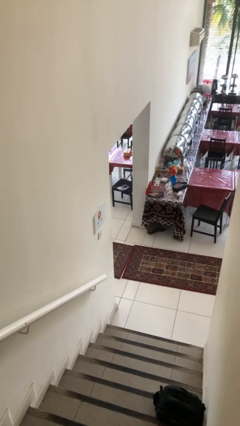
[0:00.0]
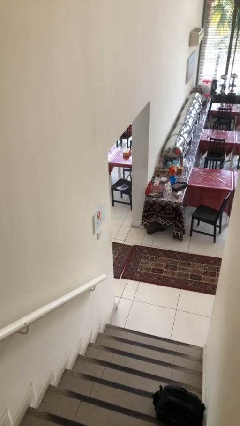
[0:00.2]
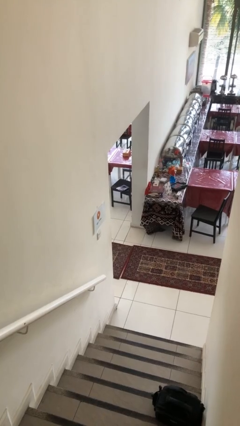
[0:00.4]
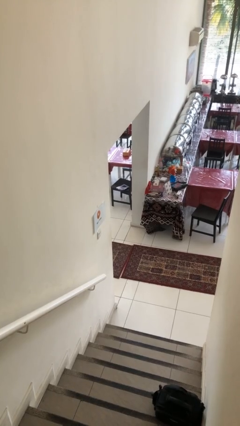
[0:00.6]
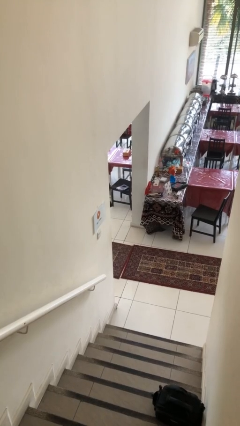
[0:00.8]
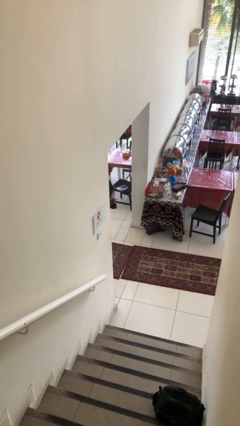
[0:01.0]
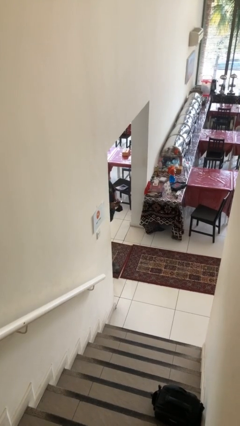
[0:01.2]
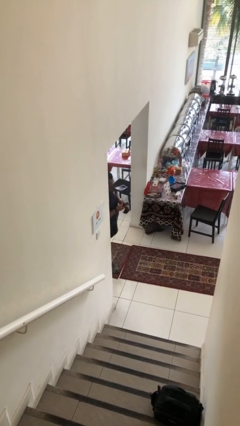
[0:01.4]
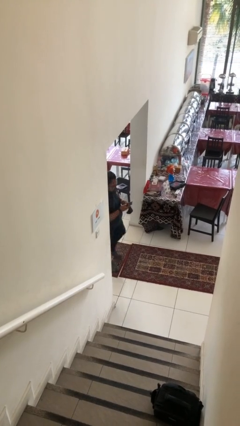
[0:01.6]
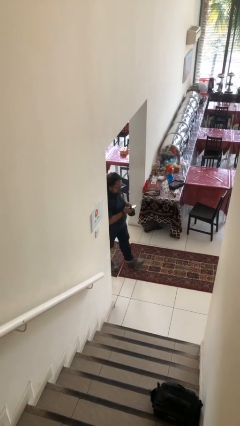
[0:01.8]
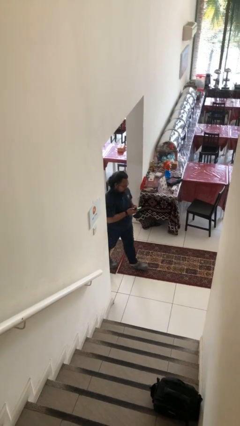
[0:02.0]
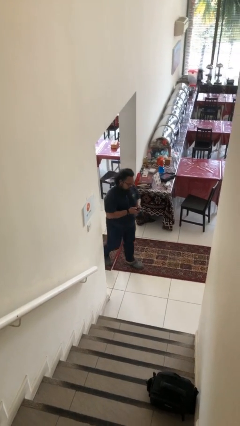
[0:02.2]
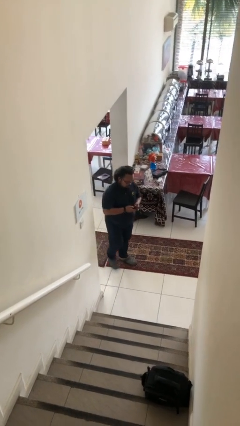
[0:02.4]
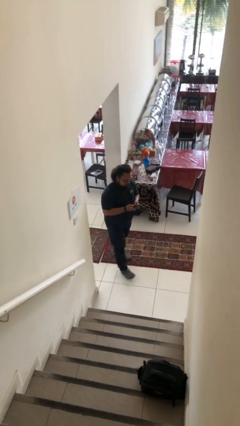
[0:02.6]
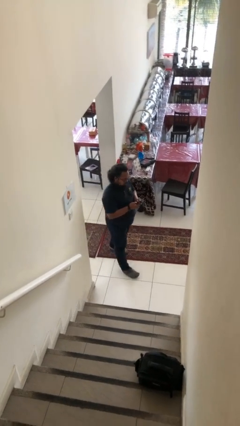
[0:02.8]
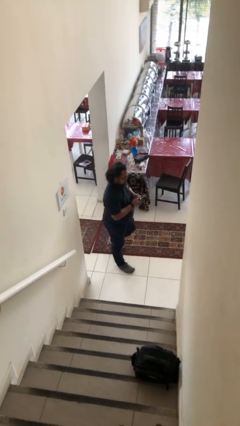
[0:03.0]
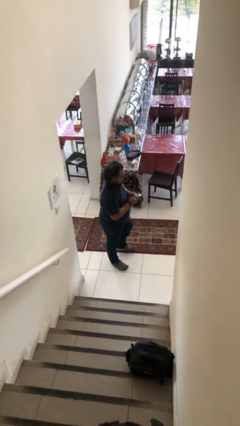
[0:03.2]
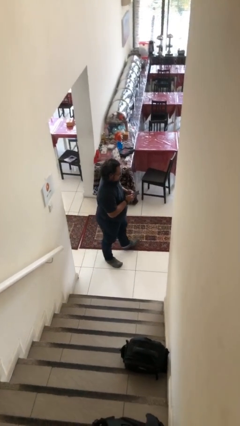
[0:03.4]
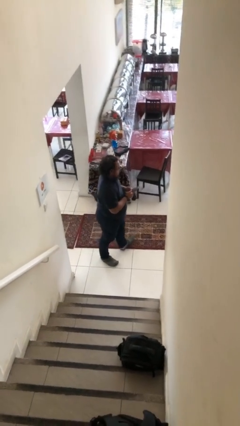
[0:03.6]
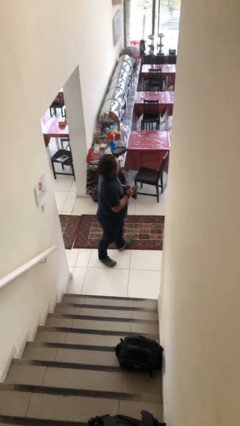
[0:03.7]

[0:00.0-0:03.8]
person enters scene through structure

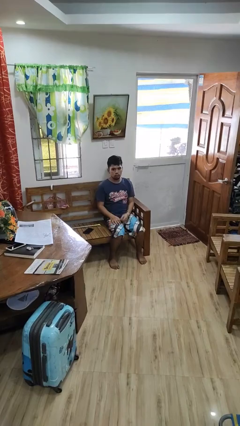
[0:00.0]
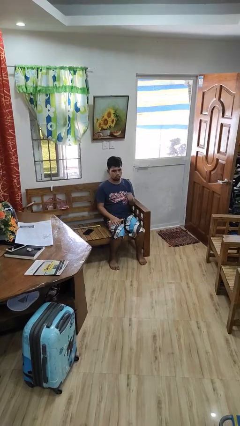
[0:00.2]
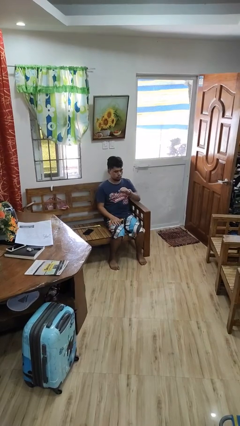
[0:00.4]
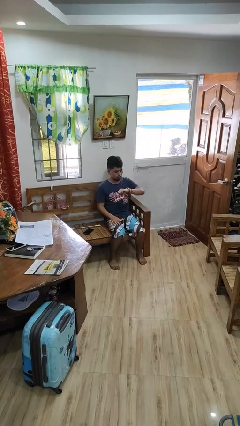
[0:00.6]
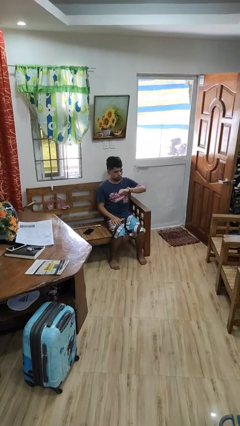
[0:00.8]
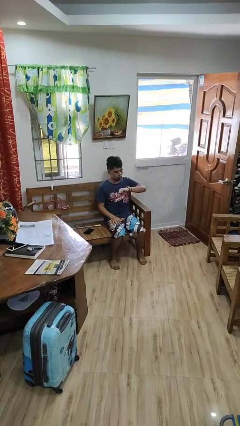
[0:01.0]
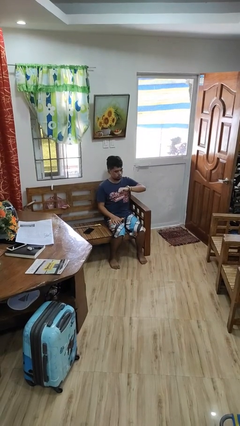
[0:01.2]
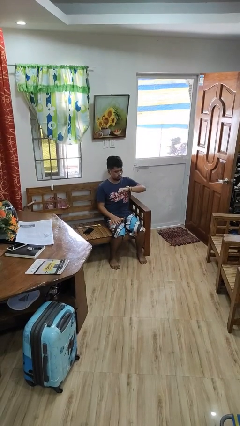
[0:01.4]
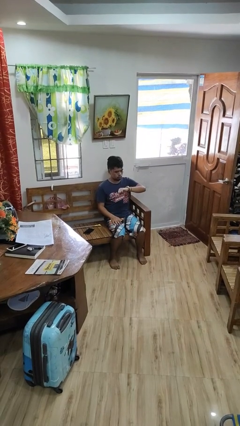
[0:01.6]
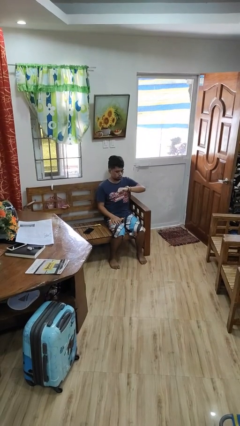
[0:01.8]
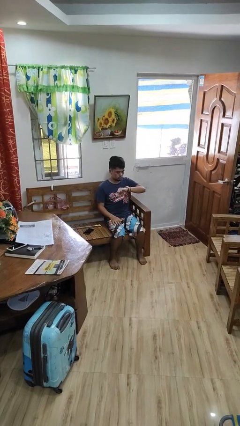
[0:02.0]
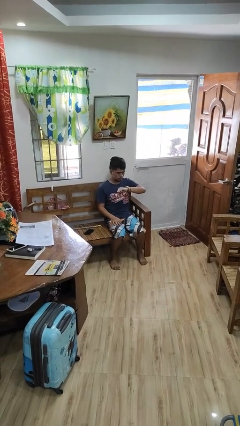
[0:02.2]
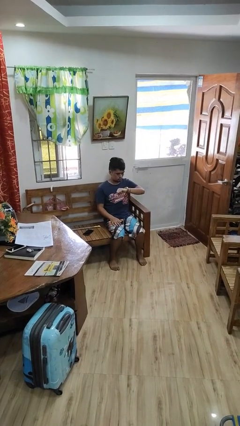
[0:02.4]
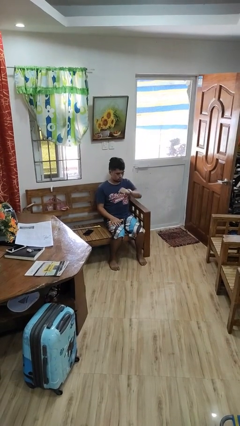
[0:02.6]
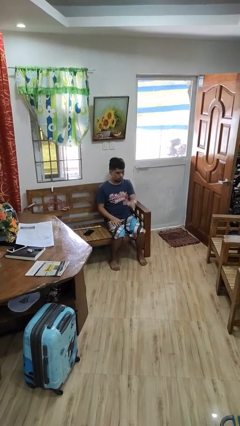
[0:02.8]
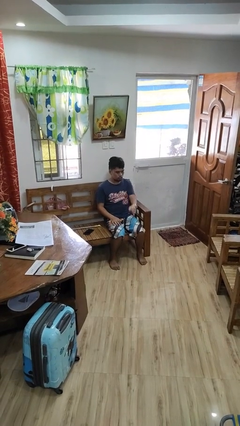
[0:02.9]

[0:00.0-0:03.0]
person looks at wristwatch

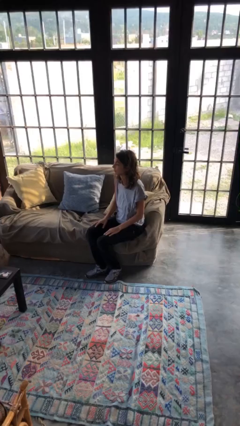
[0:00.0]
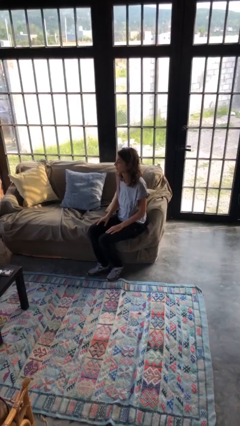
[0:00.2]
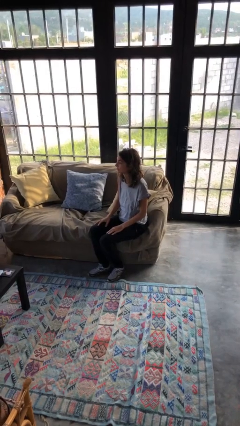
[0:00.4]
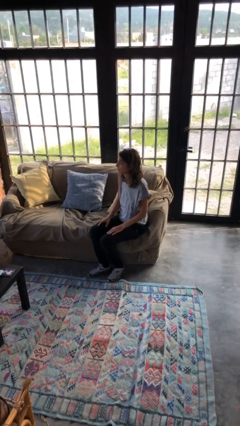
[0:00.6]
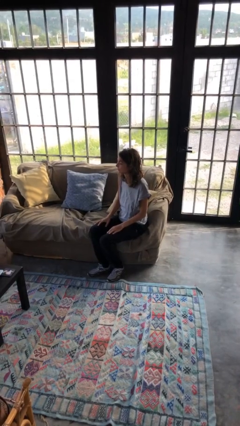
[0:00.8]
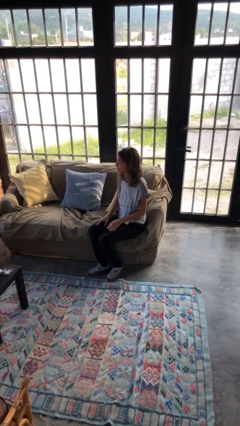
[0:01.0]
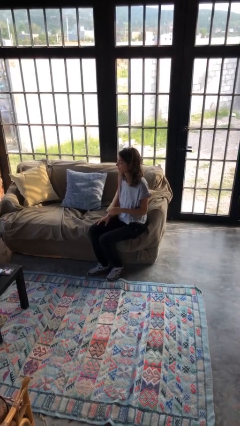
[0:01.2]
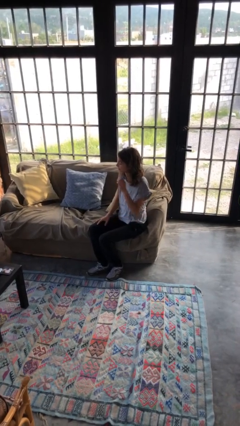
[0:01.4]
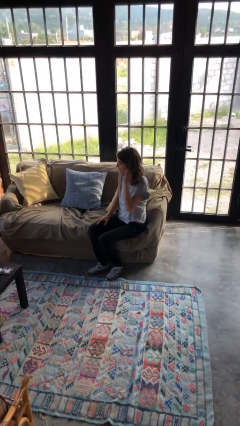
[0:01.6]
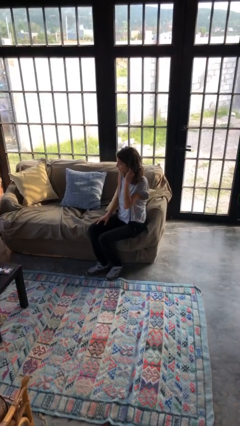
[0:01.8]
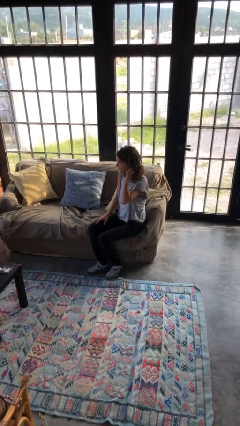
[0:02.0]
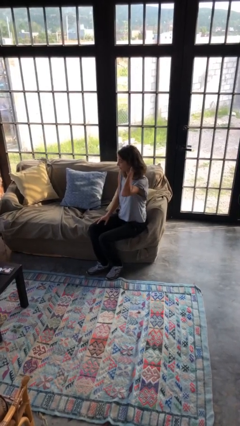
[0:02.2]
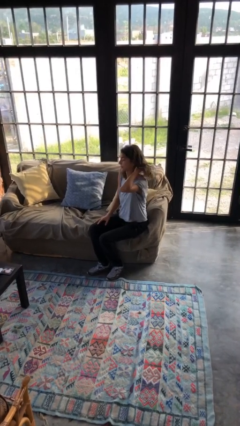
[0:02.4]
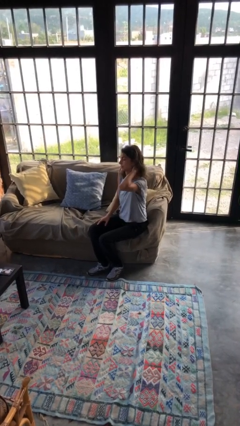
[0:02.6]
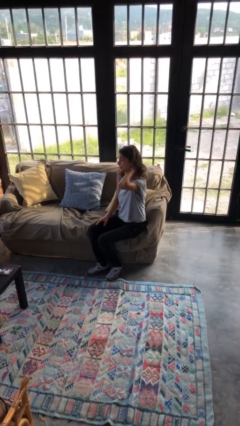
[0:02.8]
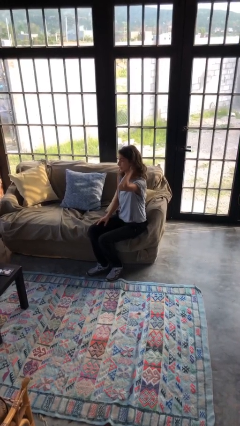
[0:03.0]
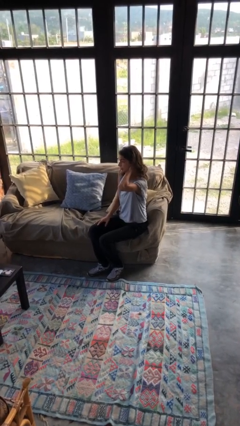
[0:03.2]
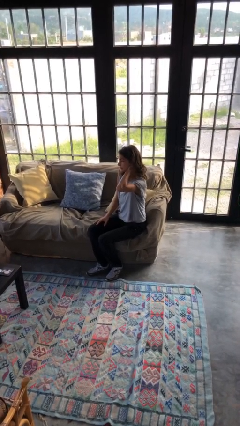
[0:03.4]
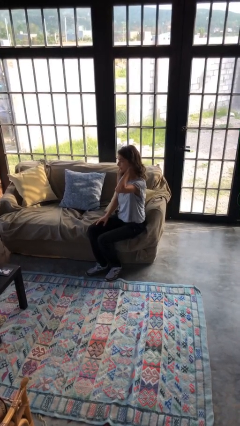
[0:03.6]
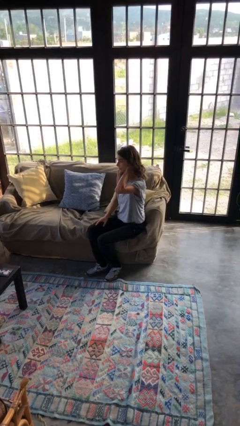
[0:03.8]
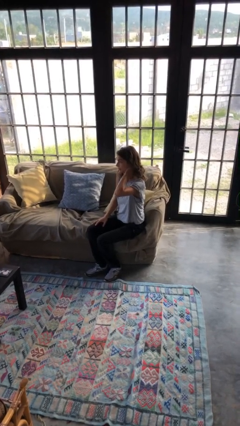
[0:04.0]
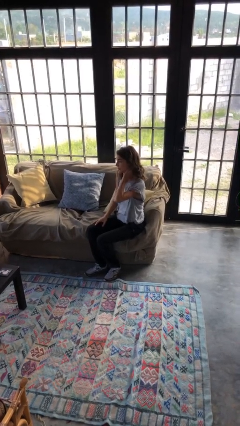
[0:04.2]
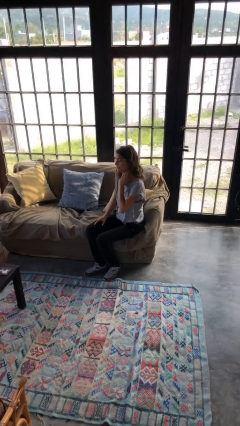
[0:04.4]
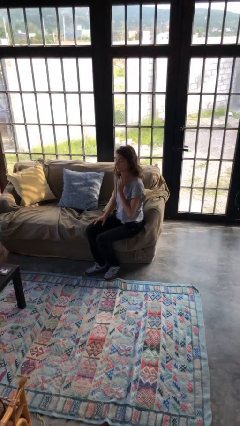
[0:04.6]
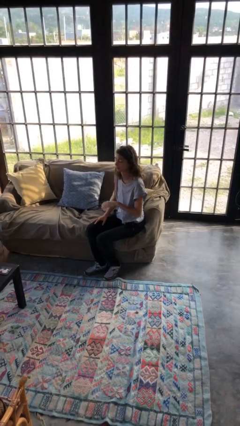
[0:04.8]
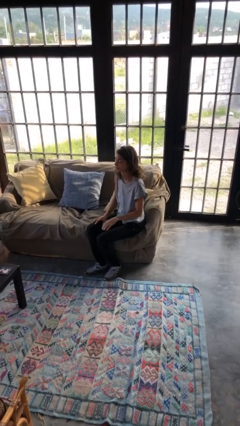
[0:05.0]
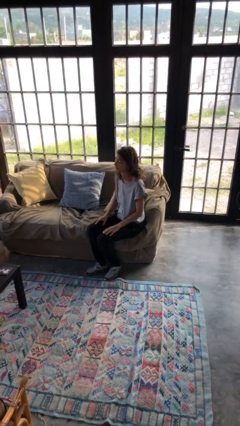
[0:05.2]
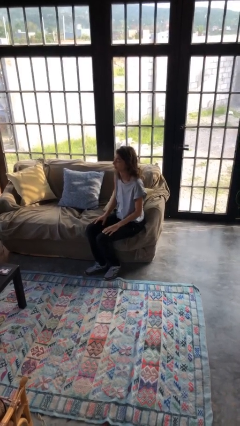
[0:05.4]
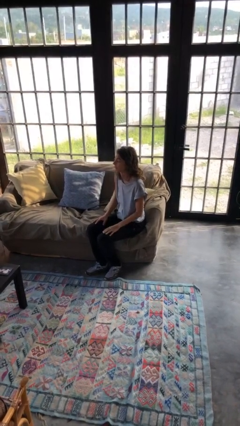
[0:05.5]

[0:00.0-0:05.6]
person scratches face

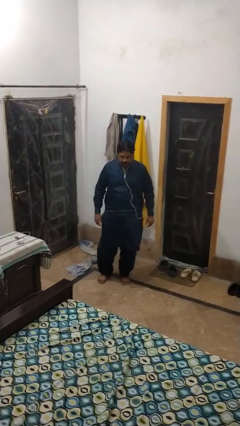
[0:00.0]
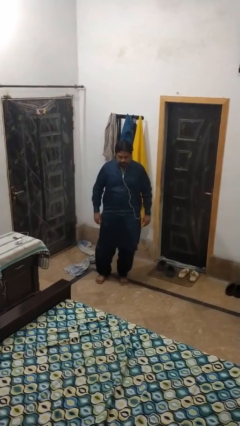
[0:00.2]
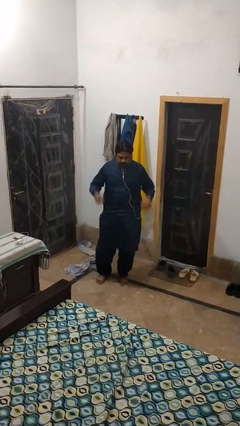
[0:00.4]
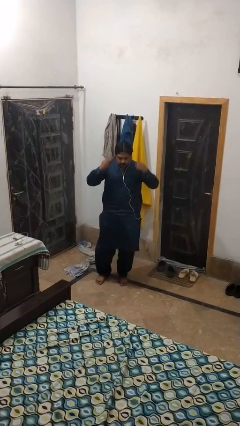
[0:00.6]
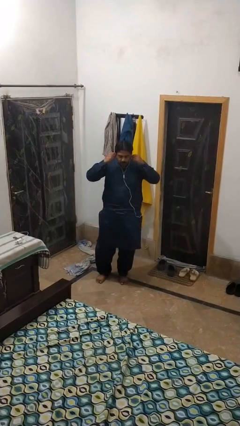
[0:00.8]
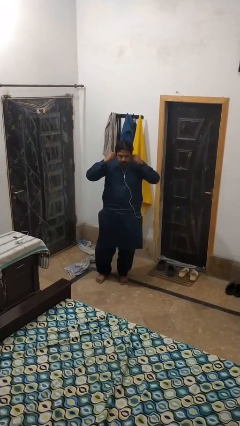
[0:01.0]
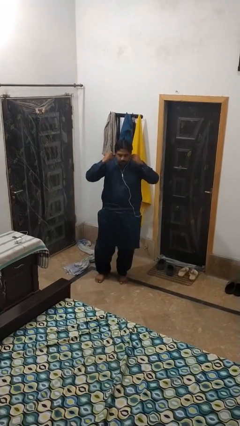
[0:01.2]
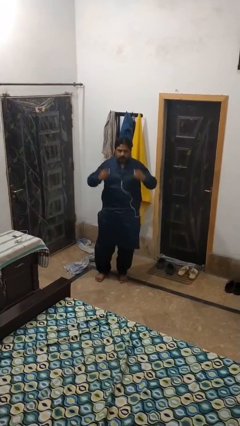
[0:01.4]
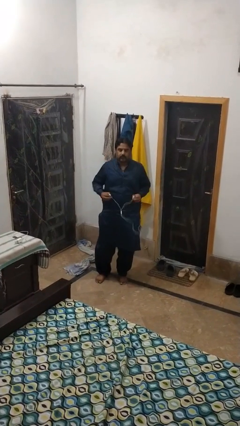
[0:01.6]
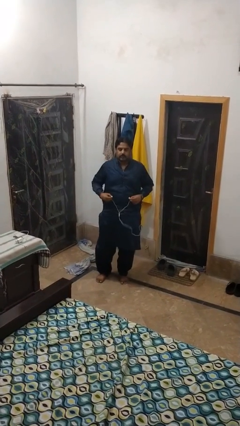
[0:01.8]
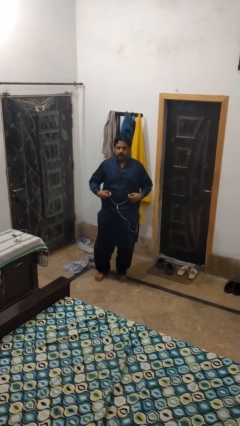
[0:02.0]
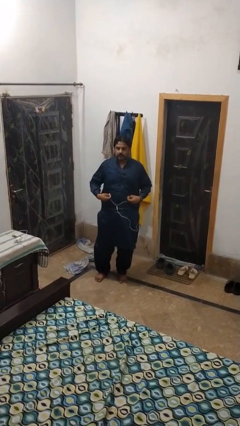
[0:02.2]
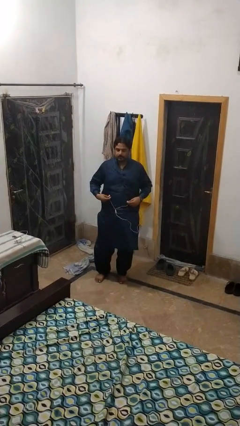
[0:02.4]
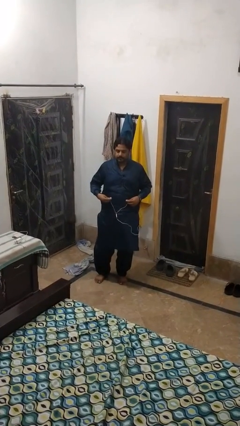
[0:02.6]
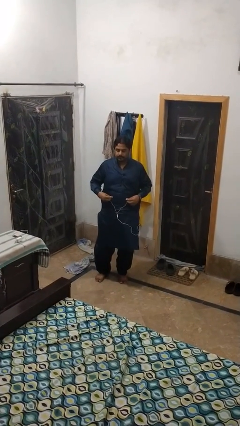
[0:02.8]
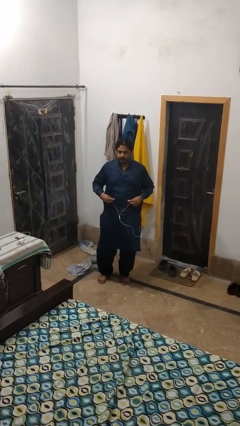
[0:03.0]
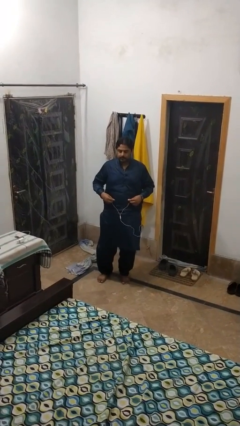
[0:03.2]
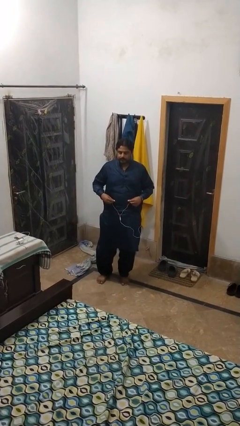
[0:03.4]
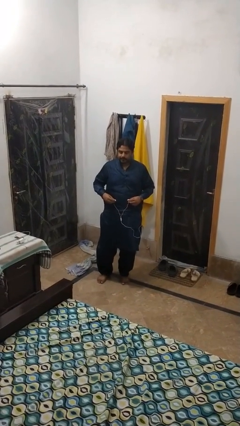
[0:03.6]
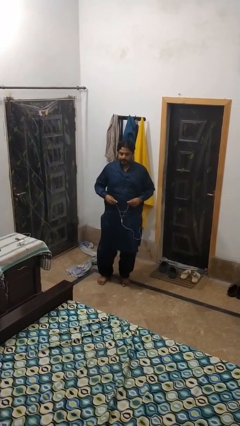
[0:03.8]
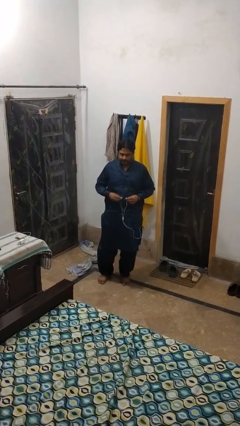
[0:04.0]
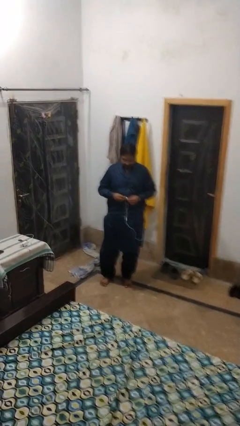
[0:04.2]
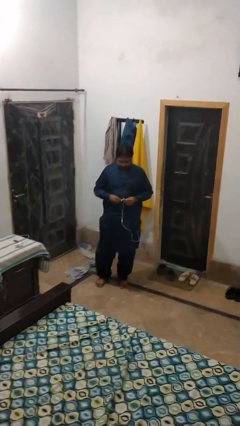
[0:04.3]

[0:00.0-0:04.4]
person takes off headphones

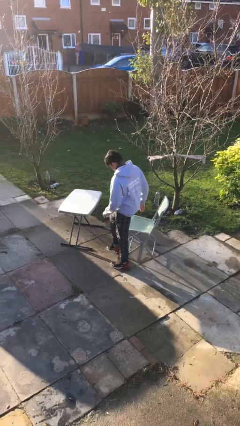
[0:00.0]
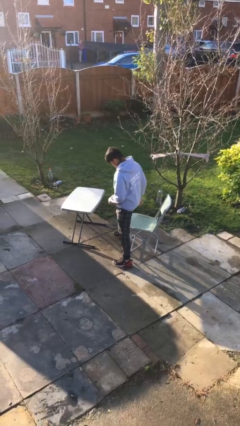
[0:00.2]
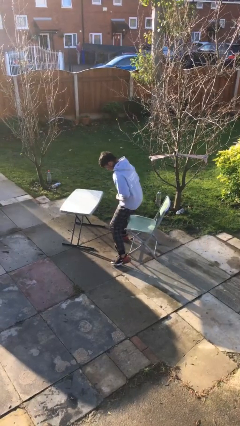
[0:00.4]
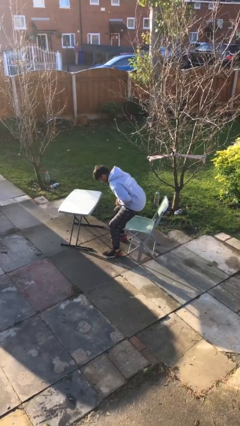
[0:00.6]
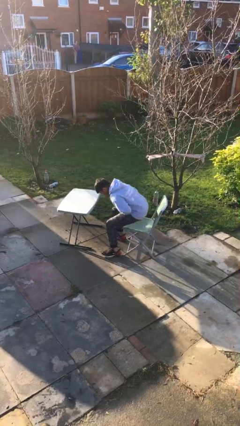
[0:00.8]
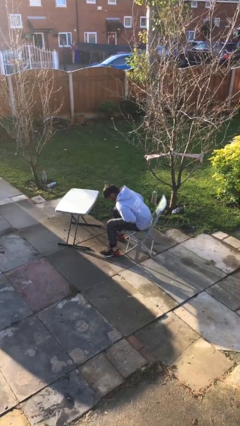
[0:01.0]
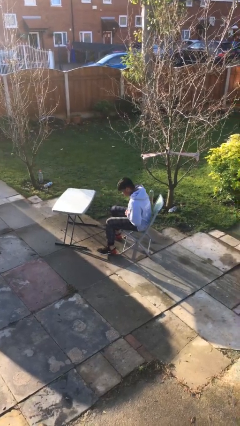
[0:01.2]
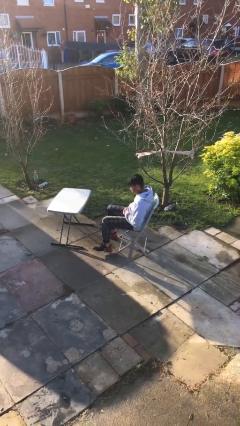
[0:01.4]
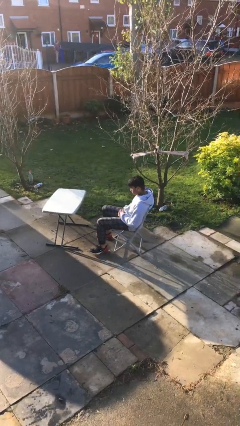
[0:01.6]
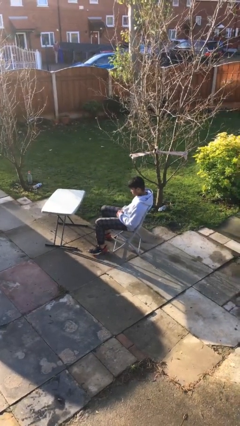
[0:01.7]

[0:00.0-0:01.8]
person sits down
